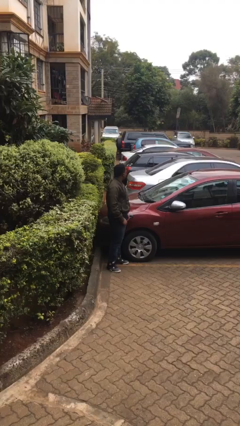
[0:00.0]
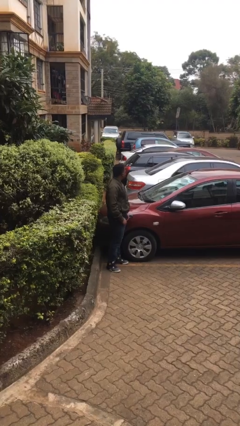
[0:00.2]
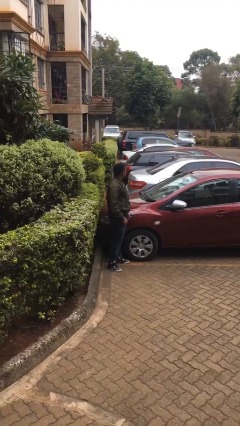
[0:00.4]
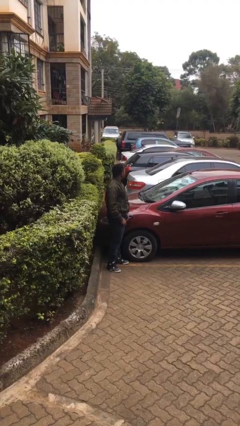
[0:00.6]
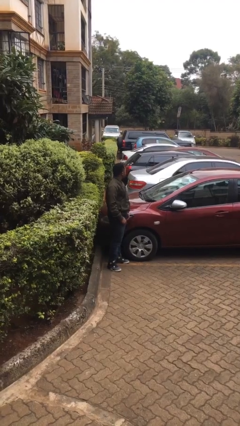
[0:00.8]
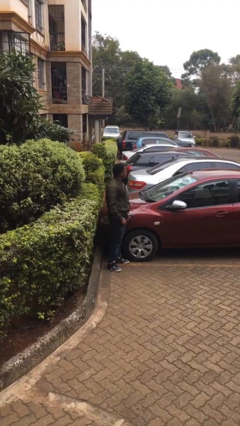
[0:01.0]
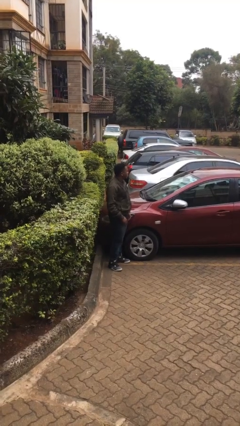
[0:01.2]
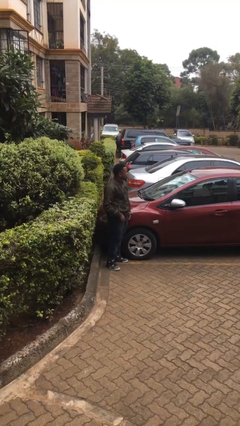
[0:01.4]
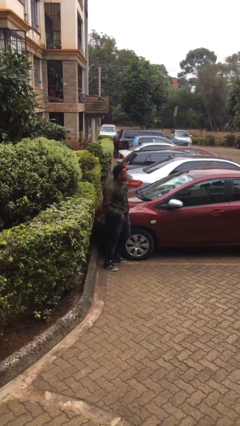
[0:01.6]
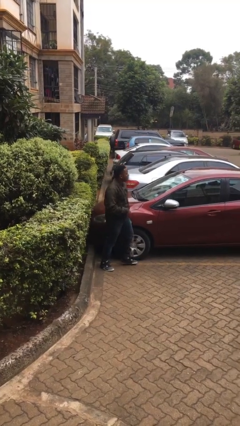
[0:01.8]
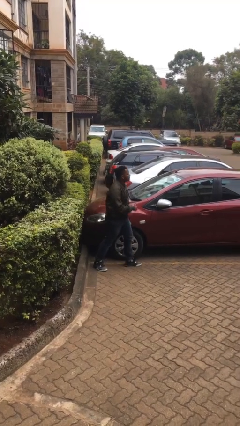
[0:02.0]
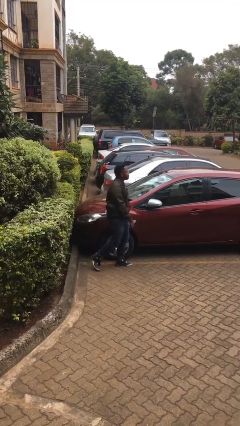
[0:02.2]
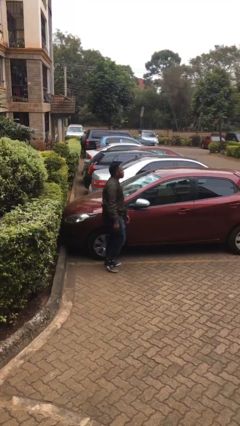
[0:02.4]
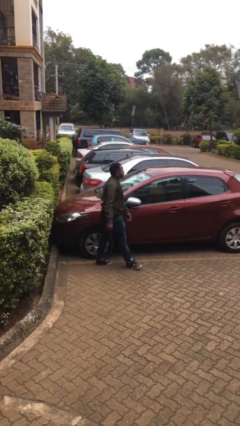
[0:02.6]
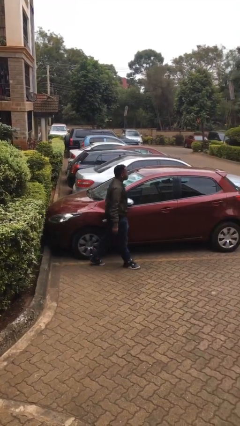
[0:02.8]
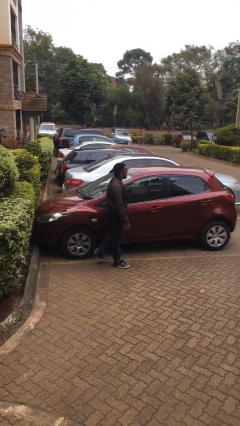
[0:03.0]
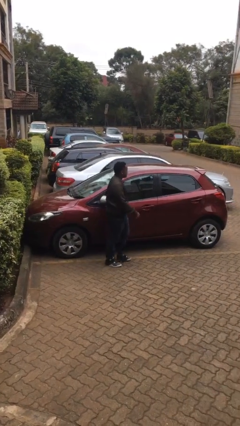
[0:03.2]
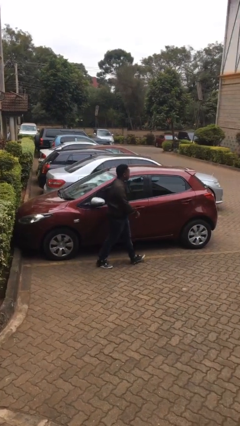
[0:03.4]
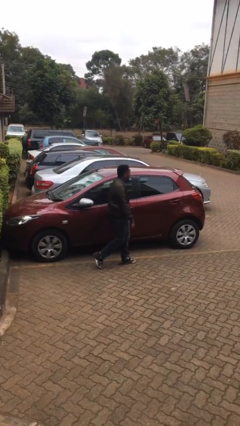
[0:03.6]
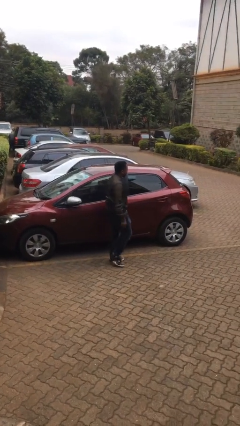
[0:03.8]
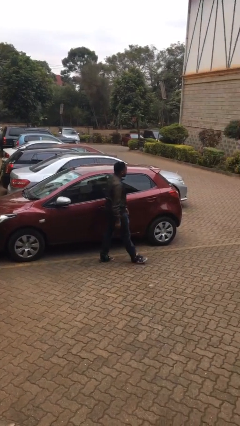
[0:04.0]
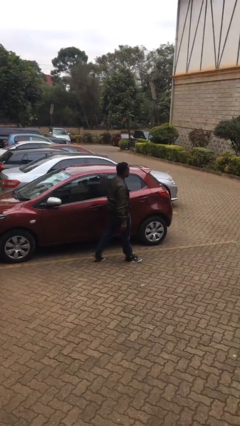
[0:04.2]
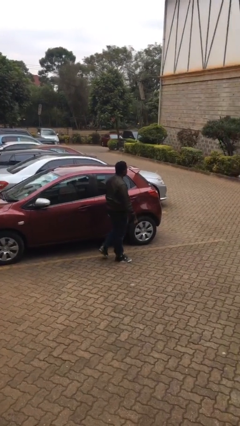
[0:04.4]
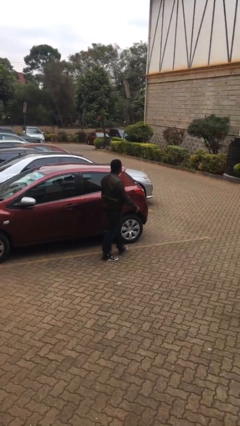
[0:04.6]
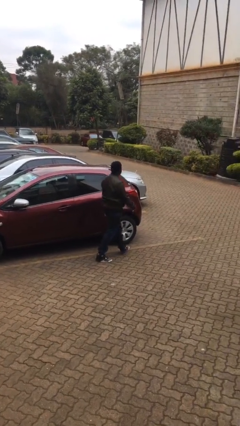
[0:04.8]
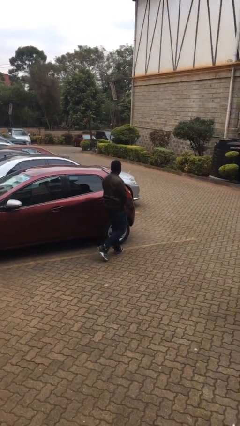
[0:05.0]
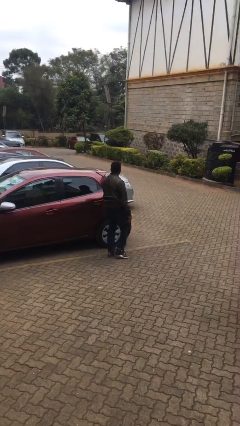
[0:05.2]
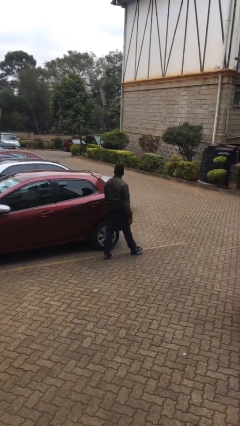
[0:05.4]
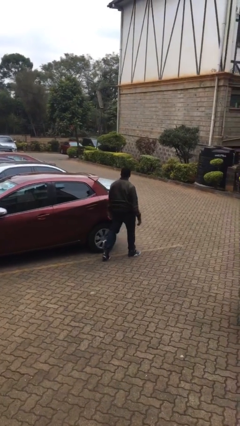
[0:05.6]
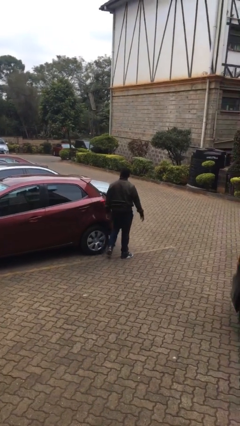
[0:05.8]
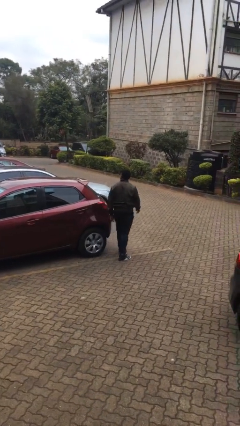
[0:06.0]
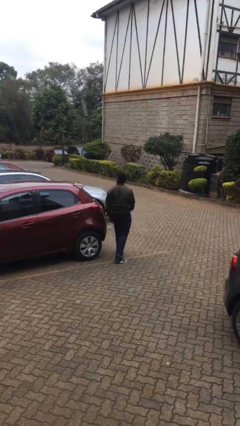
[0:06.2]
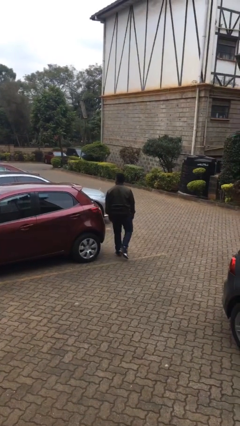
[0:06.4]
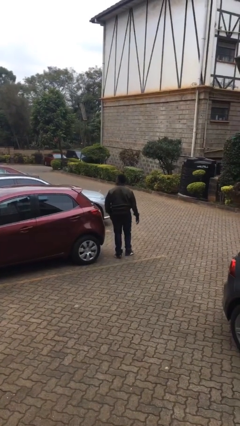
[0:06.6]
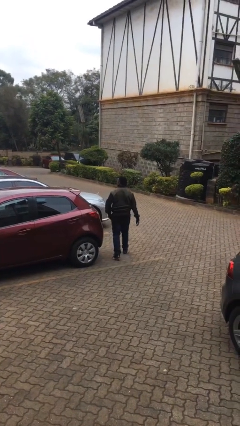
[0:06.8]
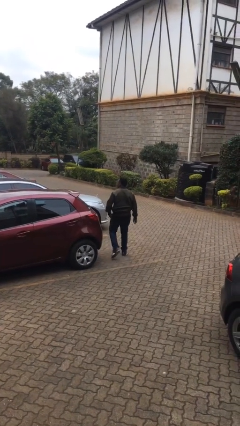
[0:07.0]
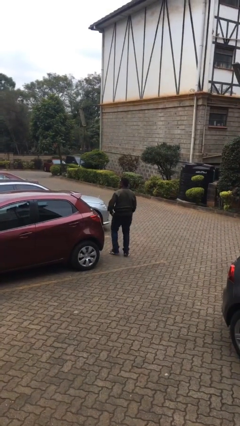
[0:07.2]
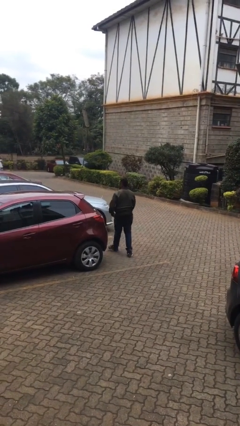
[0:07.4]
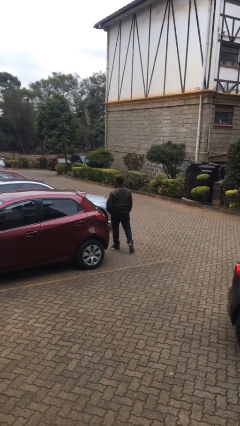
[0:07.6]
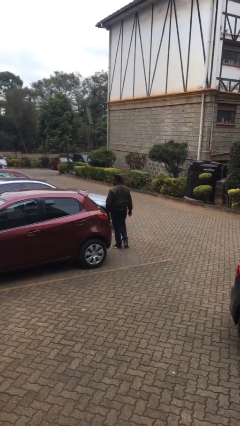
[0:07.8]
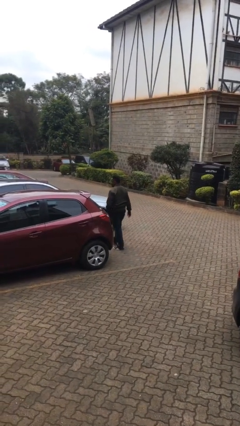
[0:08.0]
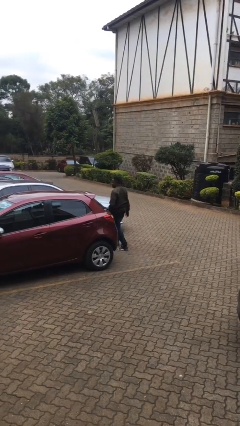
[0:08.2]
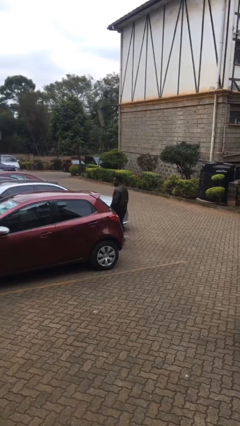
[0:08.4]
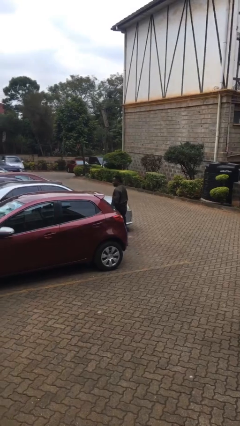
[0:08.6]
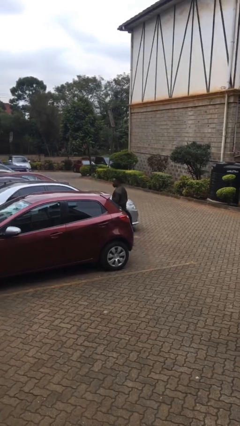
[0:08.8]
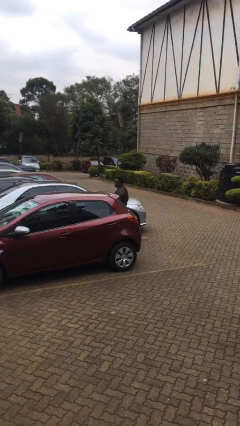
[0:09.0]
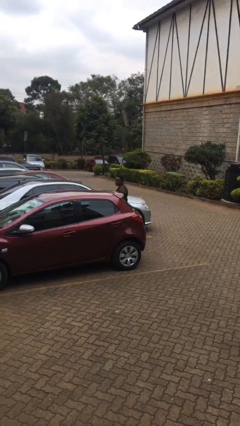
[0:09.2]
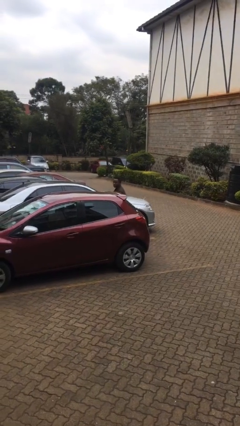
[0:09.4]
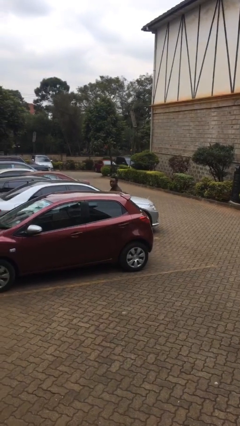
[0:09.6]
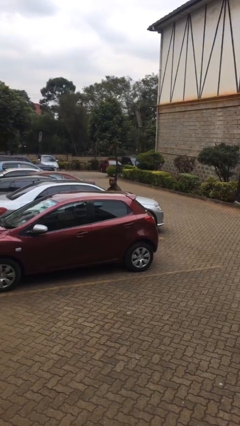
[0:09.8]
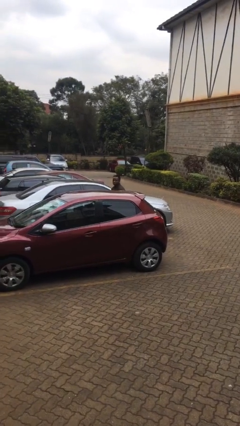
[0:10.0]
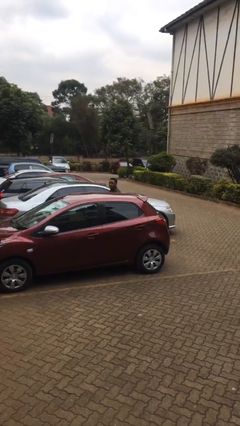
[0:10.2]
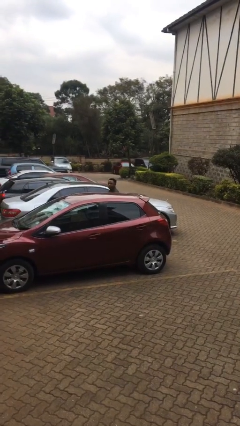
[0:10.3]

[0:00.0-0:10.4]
person walks around car

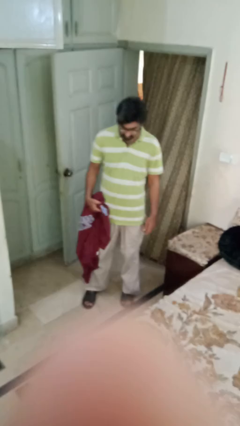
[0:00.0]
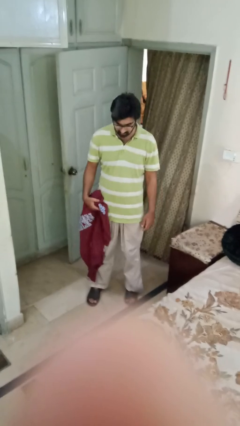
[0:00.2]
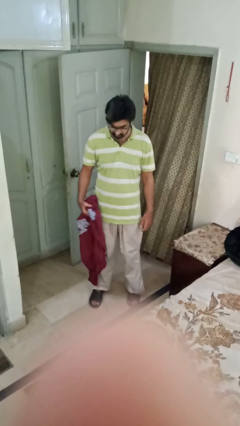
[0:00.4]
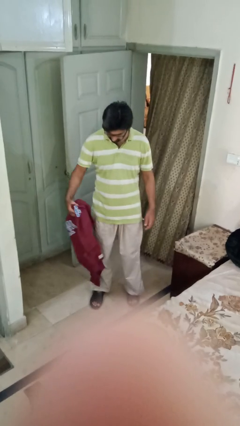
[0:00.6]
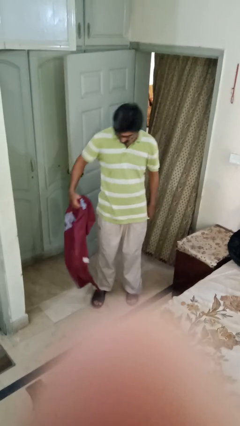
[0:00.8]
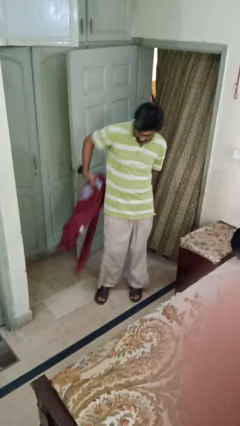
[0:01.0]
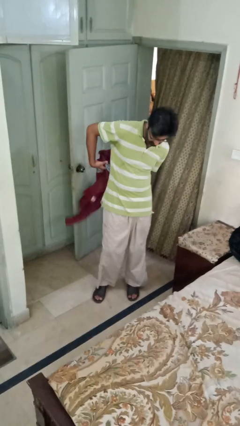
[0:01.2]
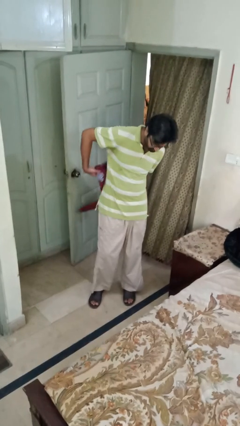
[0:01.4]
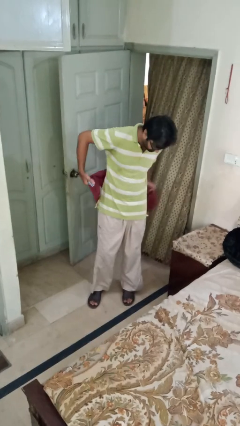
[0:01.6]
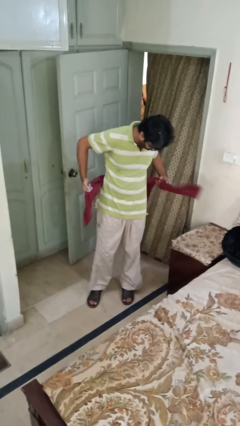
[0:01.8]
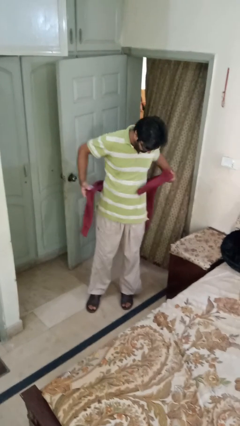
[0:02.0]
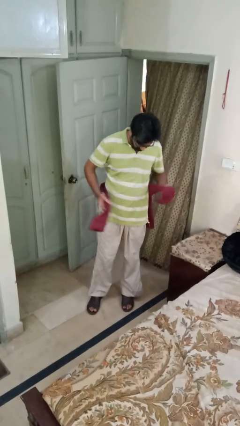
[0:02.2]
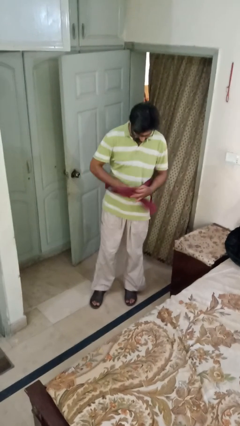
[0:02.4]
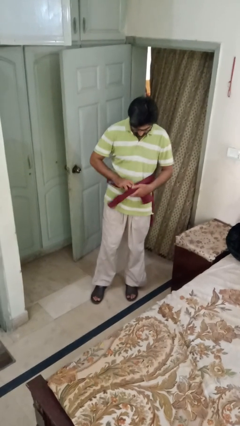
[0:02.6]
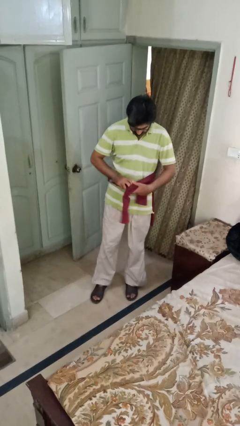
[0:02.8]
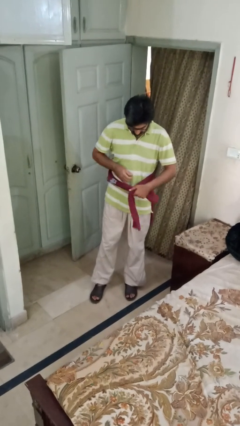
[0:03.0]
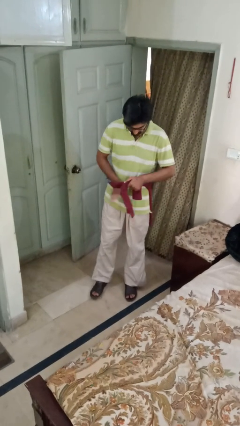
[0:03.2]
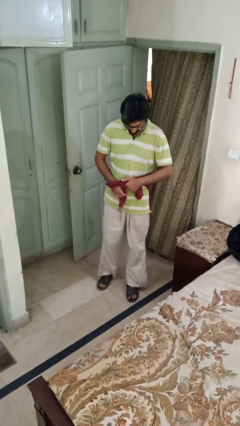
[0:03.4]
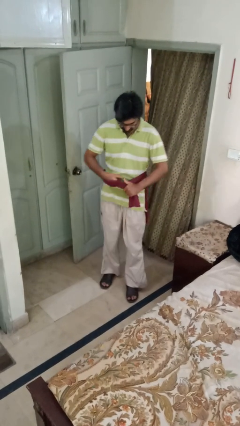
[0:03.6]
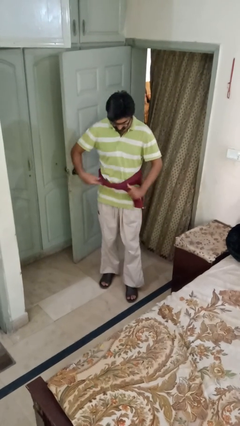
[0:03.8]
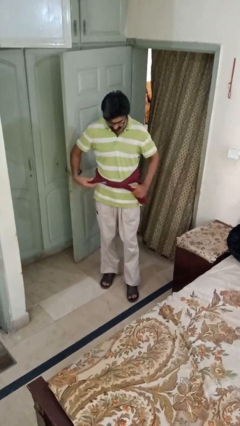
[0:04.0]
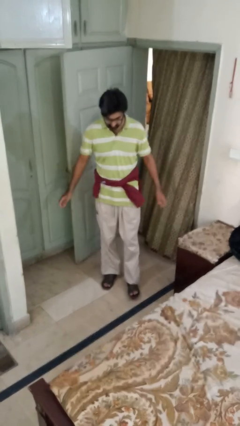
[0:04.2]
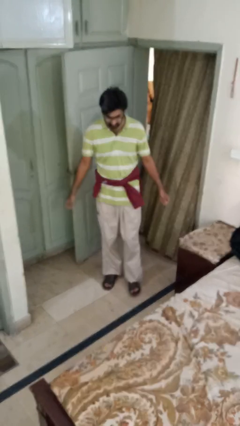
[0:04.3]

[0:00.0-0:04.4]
person ties jacket around waist

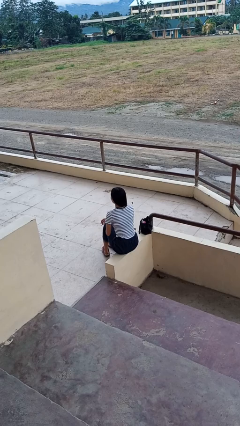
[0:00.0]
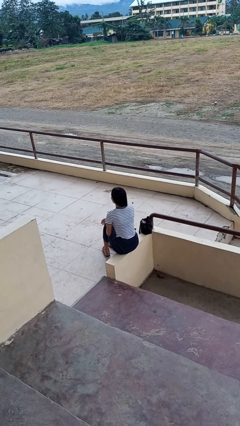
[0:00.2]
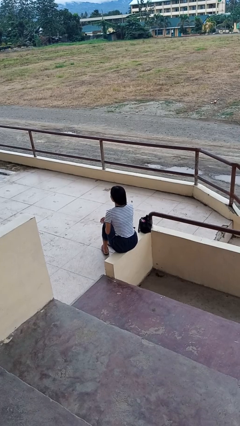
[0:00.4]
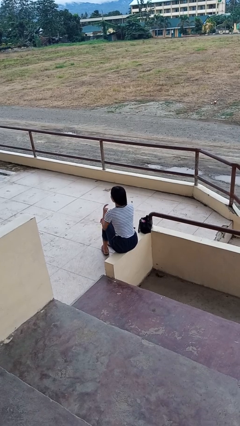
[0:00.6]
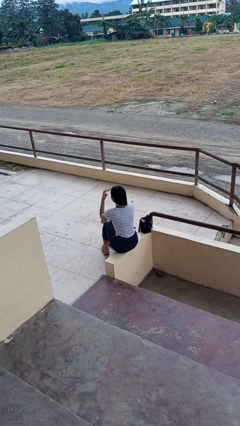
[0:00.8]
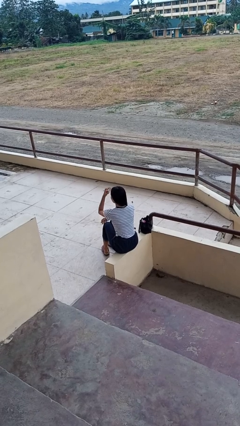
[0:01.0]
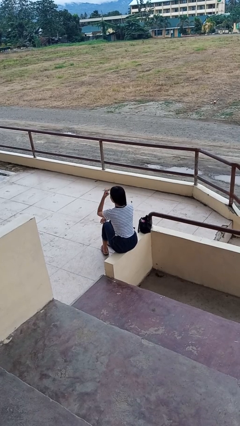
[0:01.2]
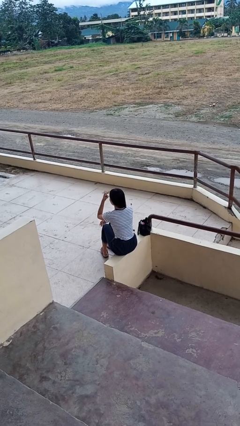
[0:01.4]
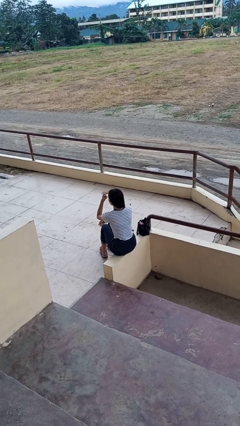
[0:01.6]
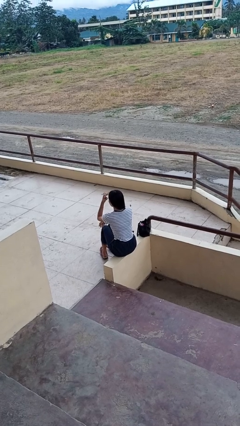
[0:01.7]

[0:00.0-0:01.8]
person gestures watch closely

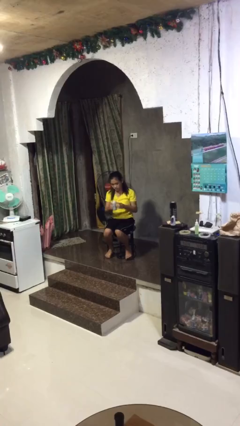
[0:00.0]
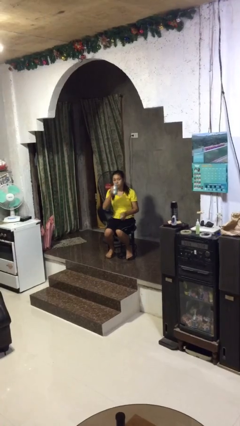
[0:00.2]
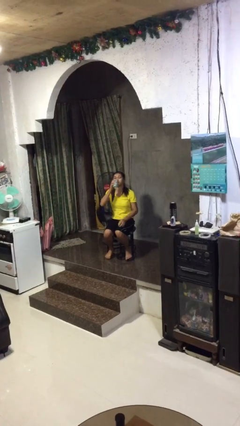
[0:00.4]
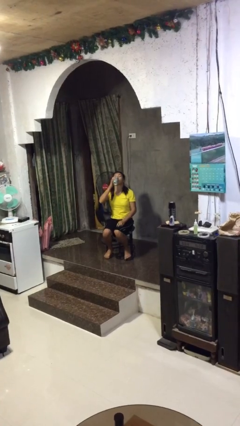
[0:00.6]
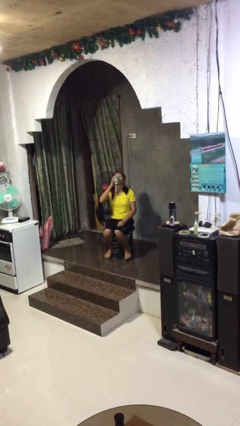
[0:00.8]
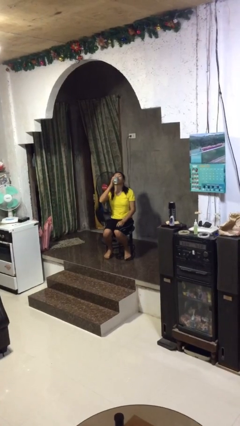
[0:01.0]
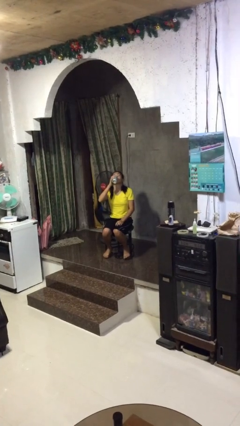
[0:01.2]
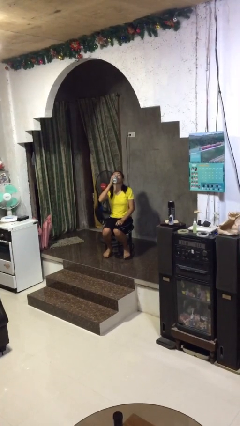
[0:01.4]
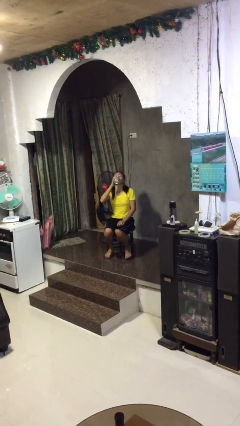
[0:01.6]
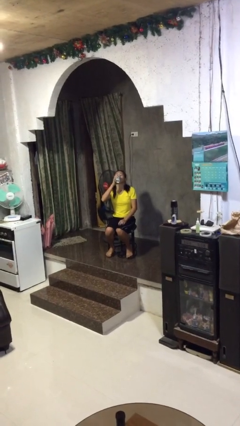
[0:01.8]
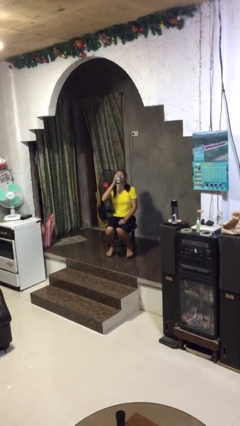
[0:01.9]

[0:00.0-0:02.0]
person drinks from beverage can
